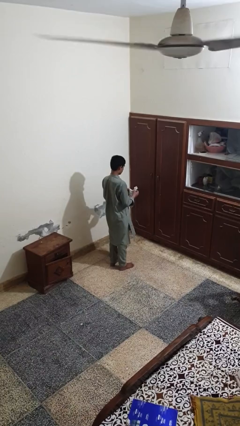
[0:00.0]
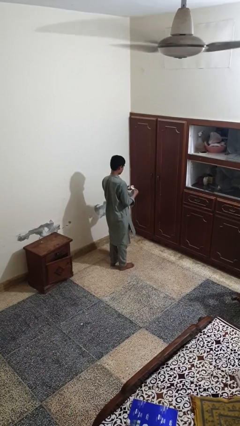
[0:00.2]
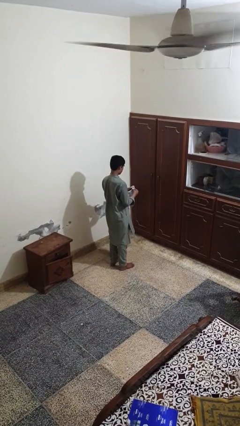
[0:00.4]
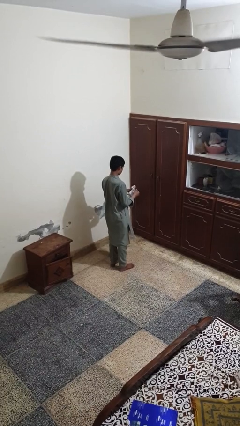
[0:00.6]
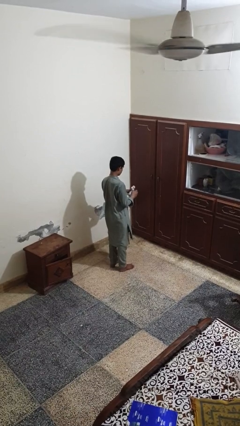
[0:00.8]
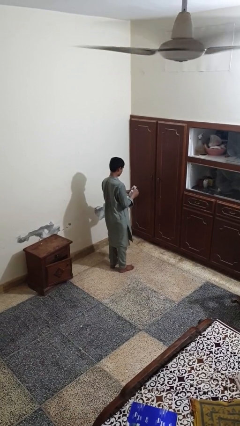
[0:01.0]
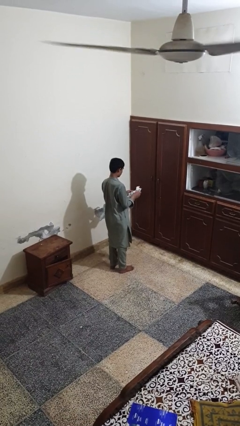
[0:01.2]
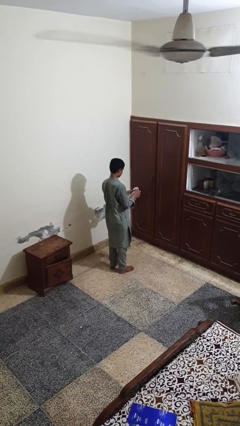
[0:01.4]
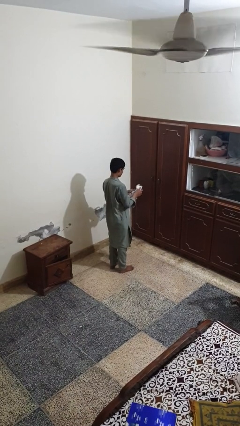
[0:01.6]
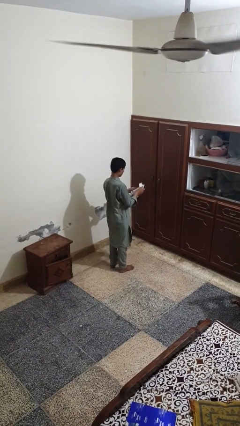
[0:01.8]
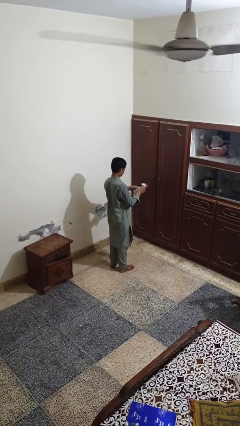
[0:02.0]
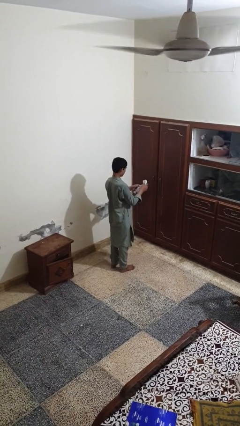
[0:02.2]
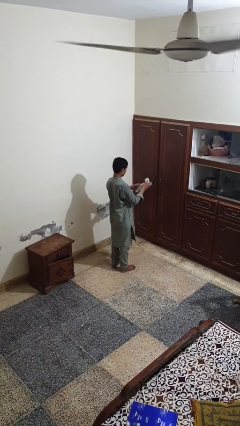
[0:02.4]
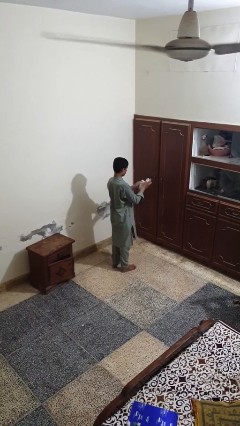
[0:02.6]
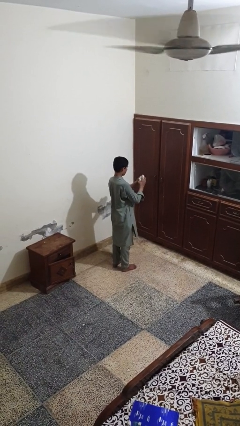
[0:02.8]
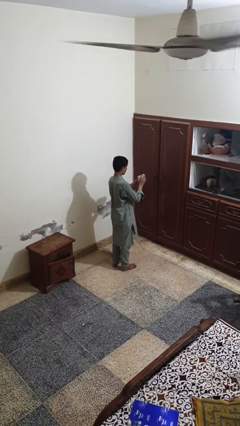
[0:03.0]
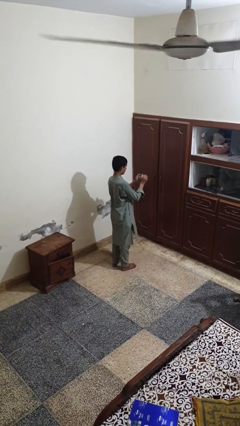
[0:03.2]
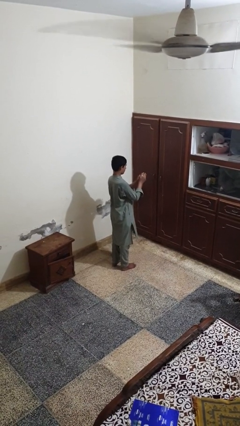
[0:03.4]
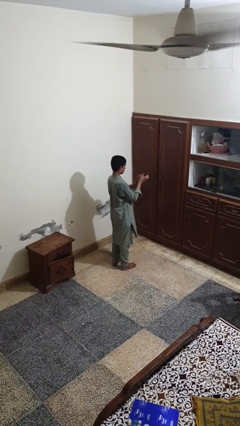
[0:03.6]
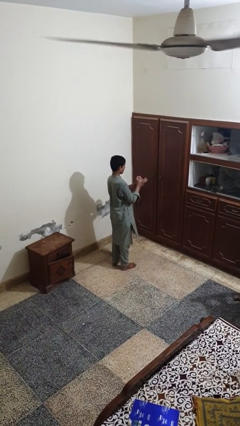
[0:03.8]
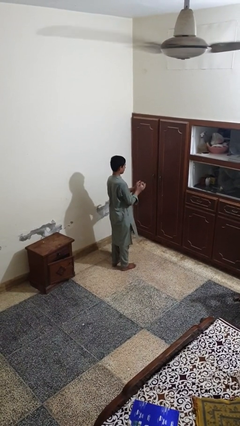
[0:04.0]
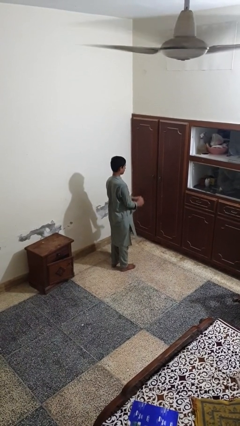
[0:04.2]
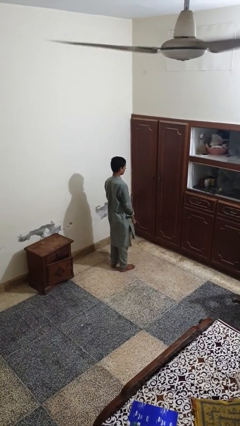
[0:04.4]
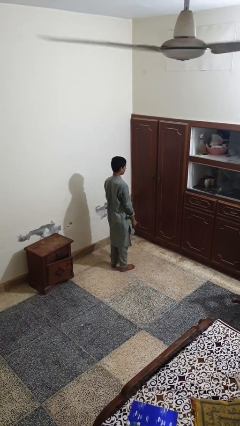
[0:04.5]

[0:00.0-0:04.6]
person crumples paper

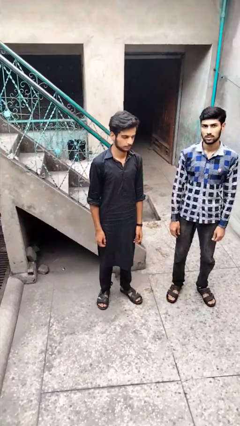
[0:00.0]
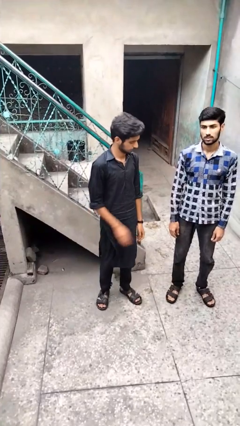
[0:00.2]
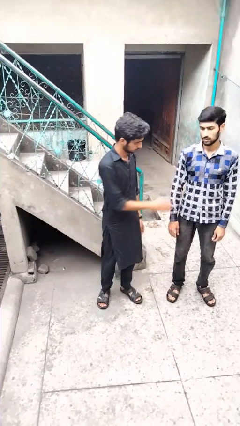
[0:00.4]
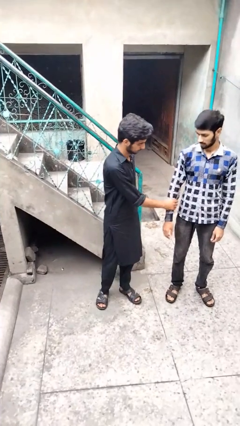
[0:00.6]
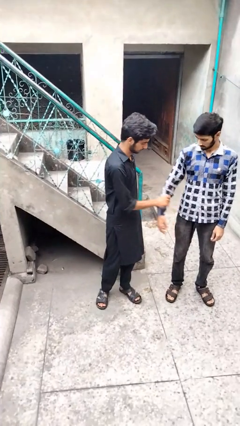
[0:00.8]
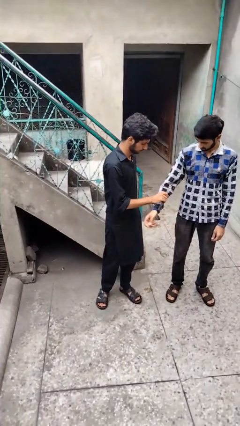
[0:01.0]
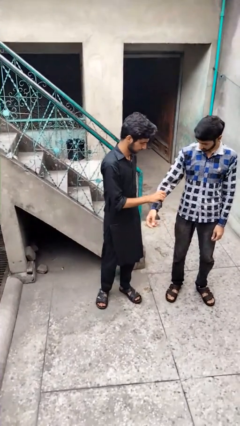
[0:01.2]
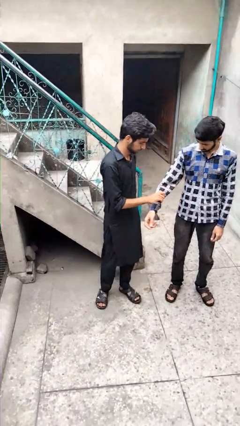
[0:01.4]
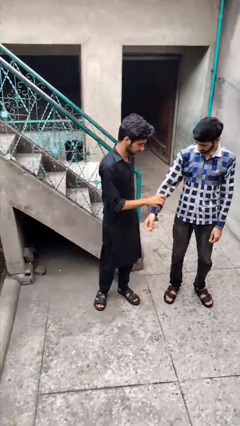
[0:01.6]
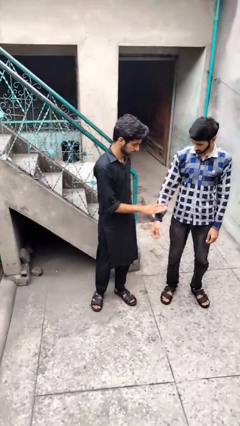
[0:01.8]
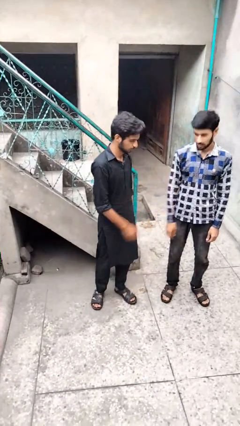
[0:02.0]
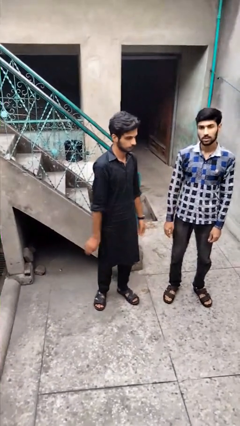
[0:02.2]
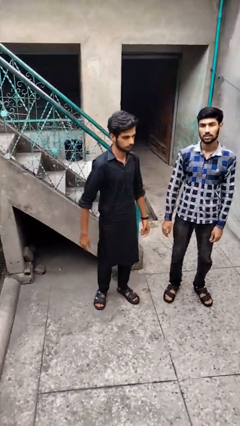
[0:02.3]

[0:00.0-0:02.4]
person grabs person by forearm

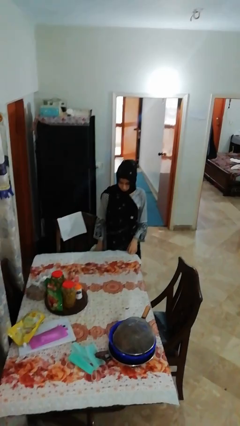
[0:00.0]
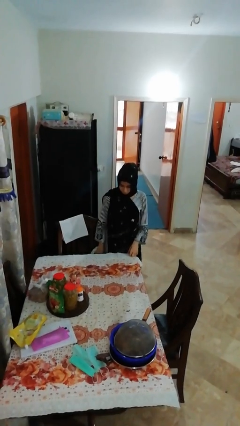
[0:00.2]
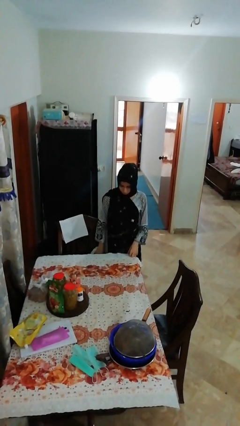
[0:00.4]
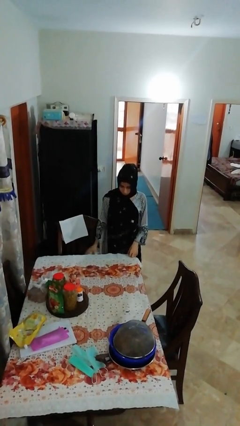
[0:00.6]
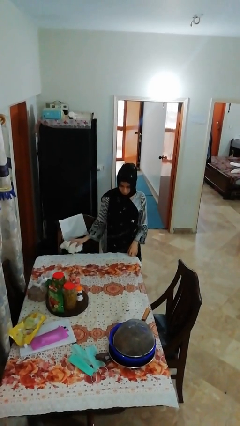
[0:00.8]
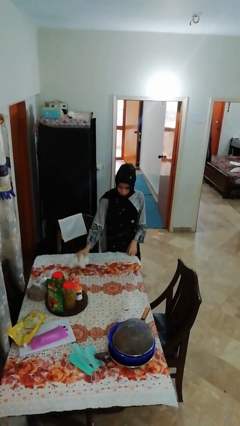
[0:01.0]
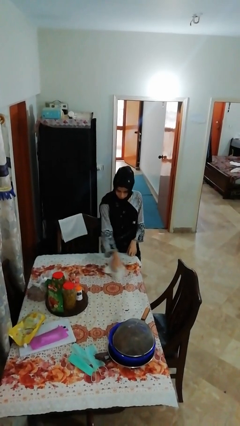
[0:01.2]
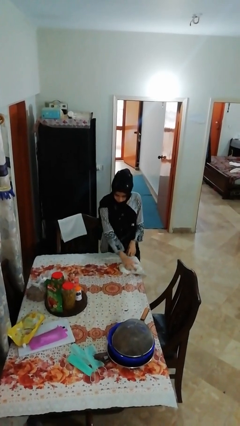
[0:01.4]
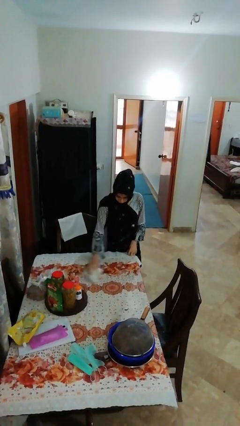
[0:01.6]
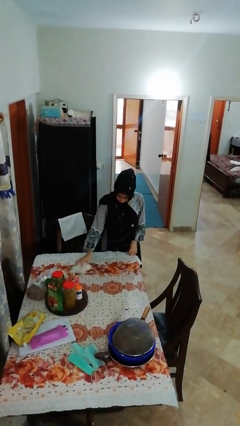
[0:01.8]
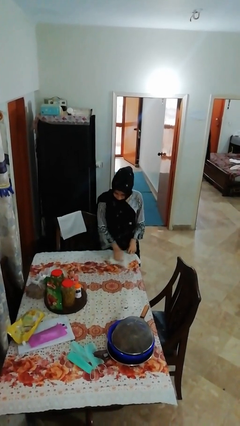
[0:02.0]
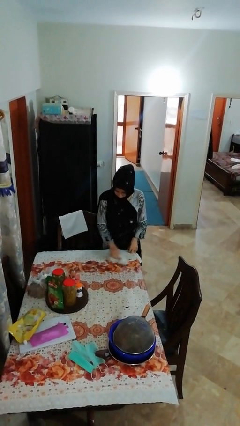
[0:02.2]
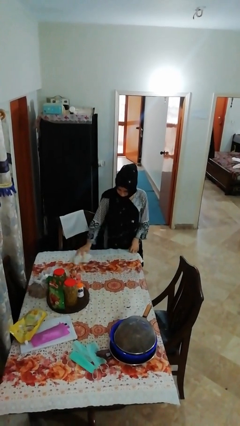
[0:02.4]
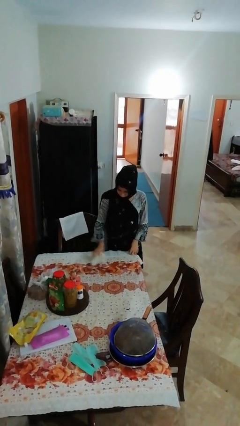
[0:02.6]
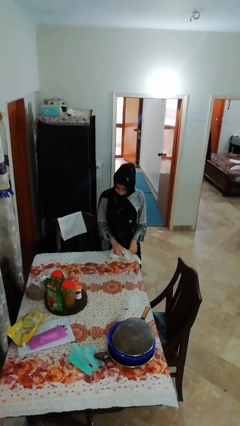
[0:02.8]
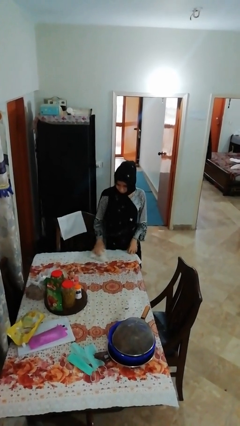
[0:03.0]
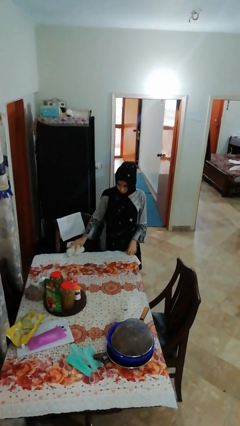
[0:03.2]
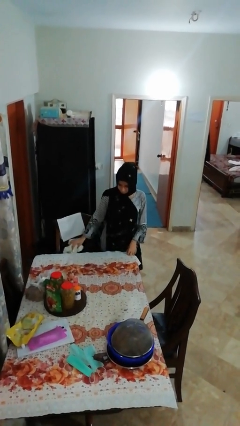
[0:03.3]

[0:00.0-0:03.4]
person cleans table with rag

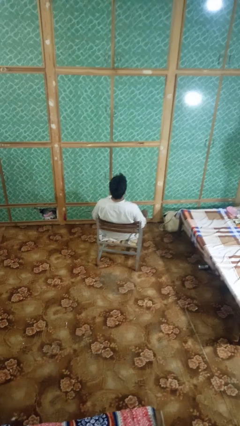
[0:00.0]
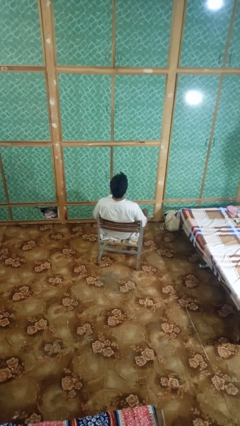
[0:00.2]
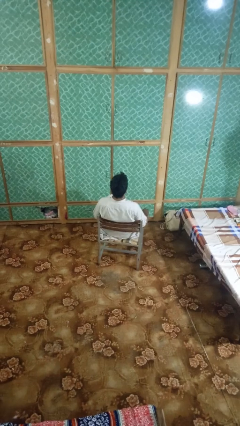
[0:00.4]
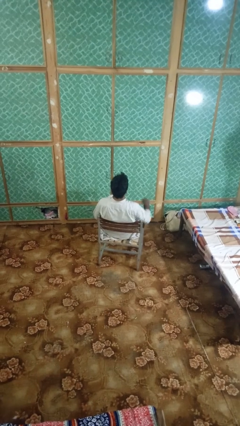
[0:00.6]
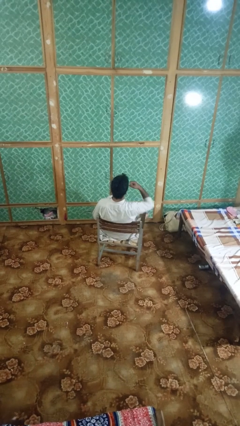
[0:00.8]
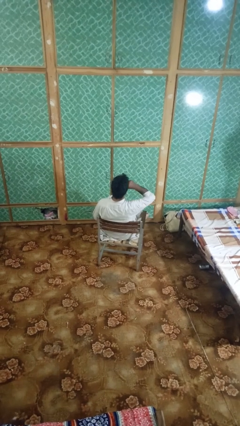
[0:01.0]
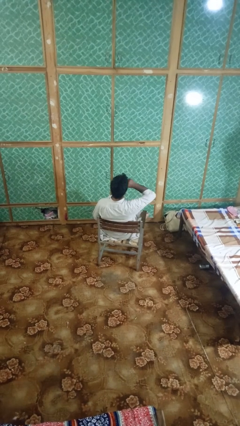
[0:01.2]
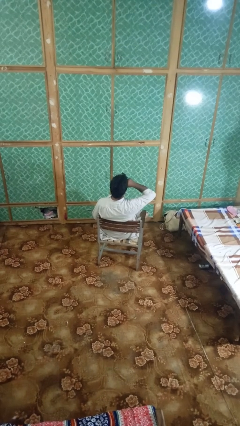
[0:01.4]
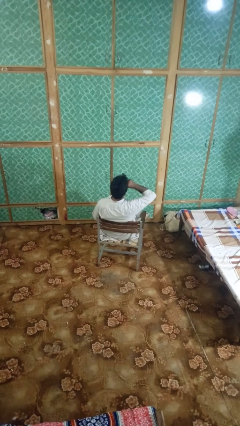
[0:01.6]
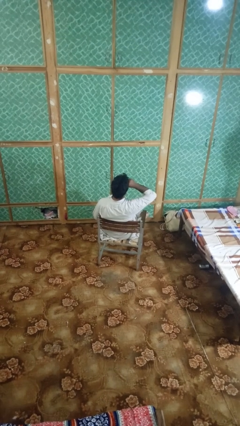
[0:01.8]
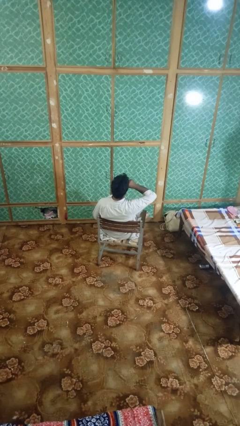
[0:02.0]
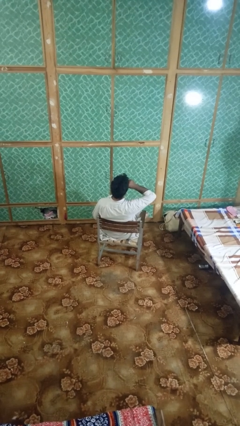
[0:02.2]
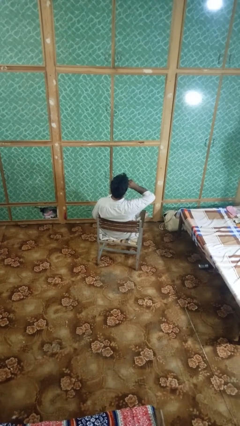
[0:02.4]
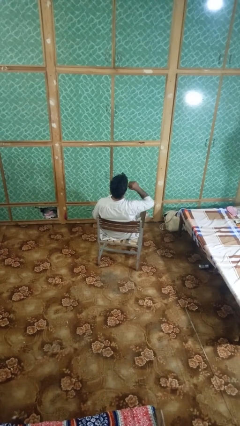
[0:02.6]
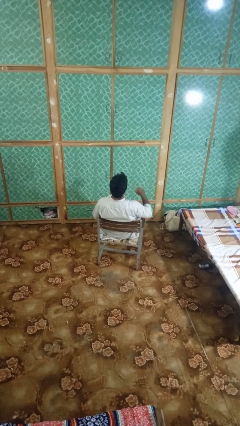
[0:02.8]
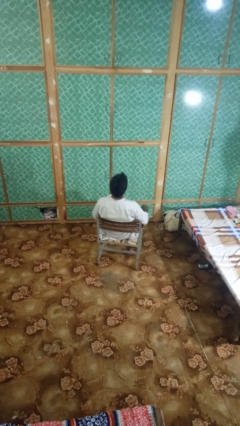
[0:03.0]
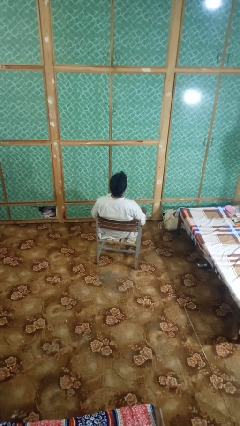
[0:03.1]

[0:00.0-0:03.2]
person rubs eyes

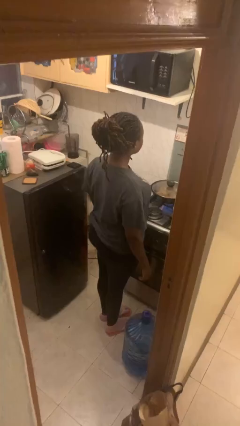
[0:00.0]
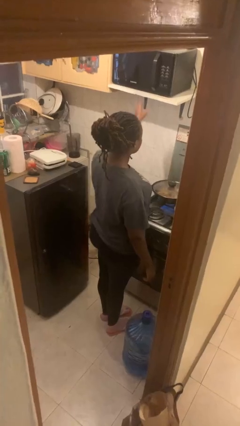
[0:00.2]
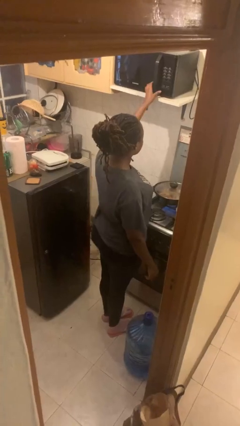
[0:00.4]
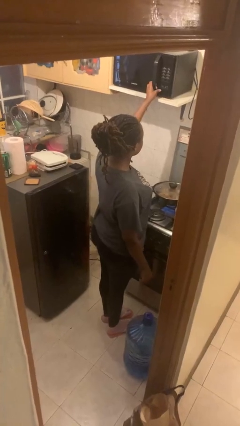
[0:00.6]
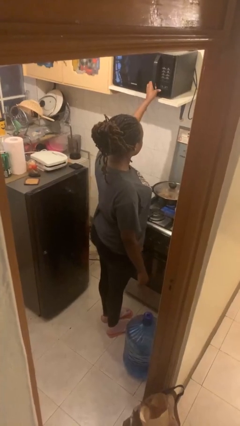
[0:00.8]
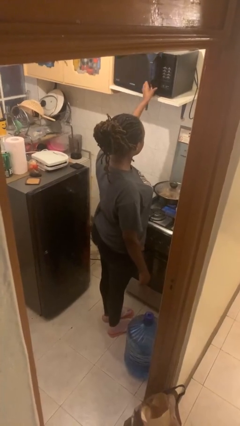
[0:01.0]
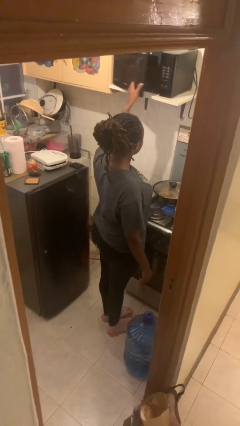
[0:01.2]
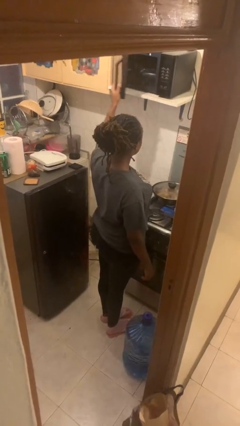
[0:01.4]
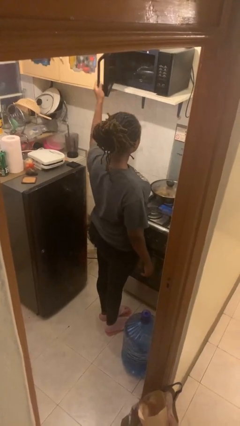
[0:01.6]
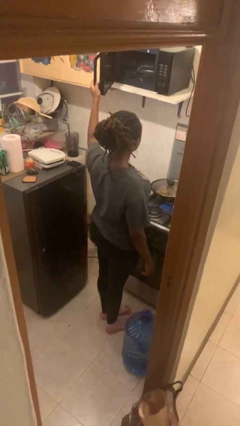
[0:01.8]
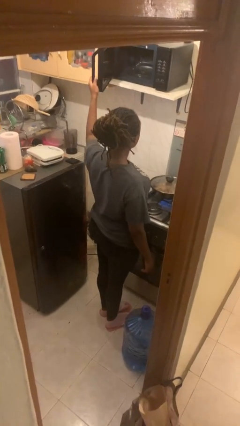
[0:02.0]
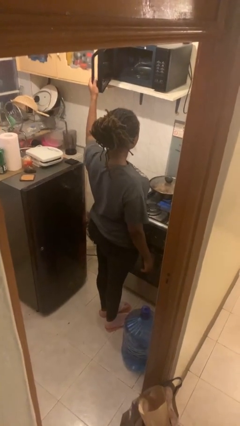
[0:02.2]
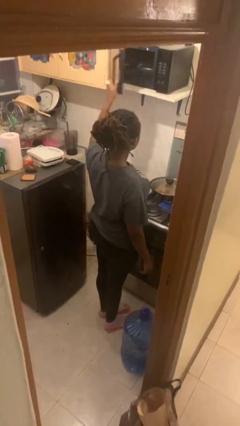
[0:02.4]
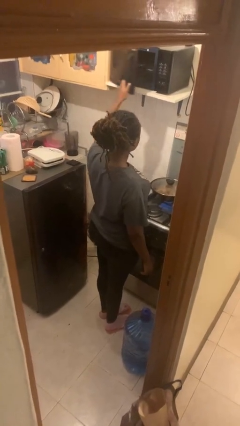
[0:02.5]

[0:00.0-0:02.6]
person opens microwave

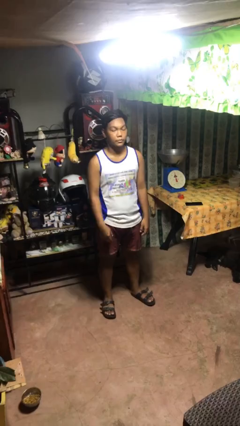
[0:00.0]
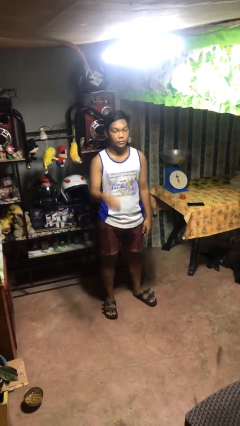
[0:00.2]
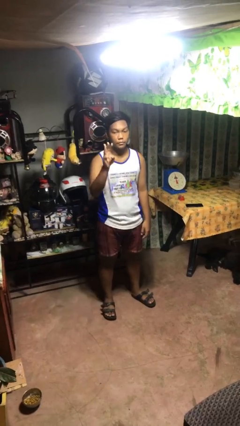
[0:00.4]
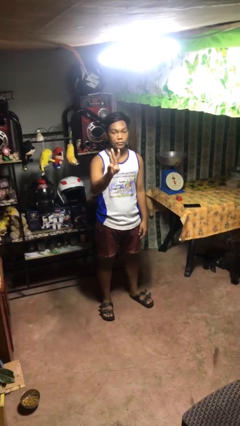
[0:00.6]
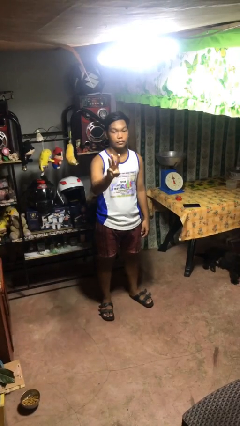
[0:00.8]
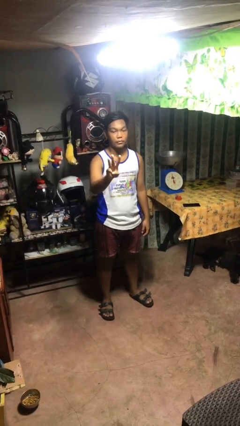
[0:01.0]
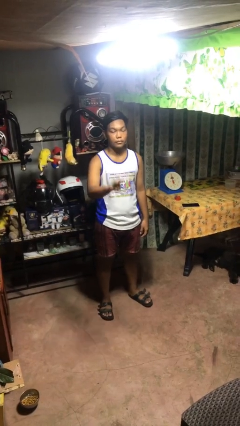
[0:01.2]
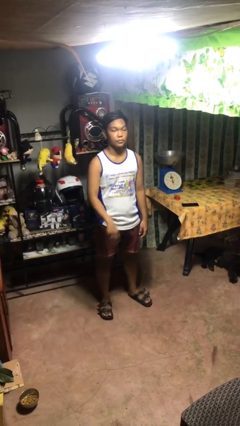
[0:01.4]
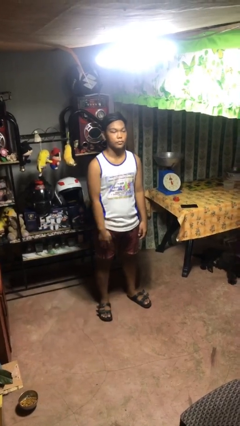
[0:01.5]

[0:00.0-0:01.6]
person gestures number three
